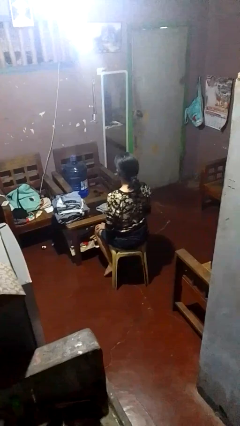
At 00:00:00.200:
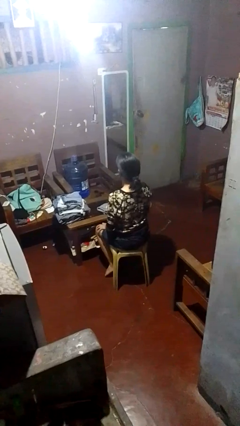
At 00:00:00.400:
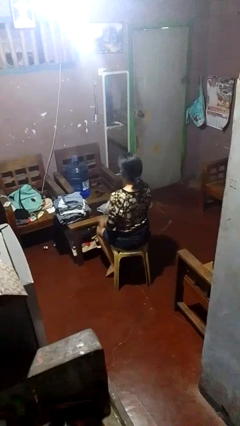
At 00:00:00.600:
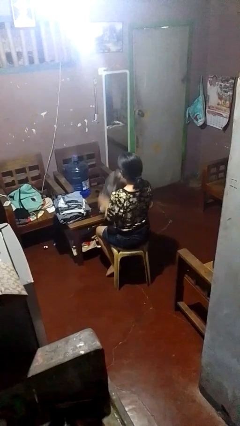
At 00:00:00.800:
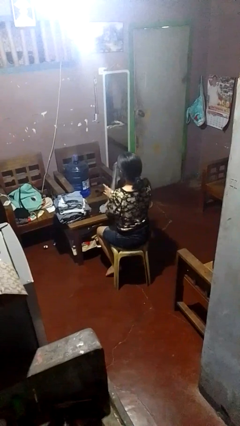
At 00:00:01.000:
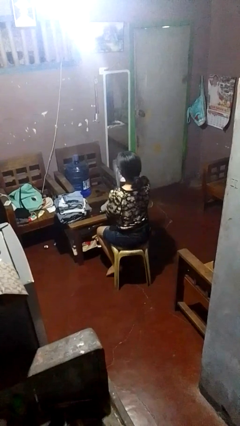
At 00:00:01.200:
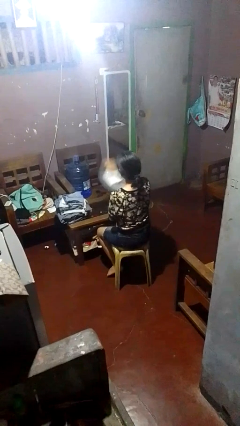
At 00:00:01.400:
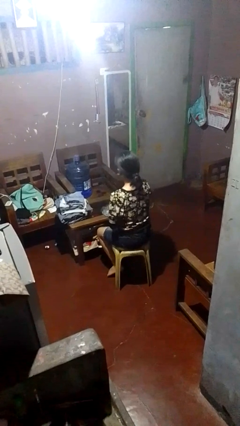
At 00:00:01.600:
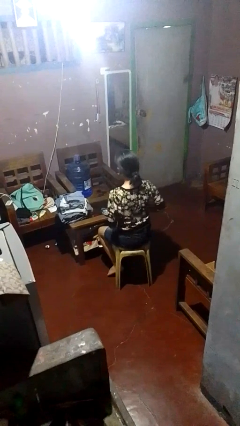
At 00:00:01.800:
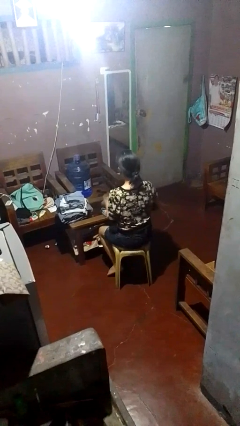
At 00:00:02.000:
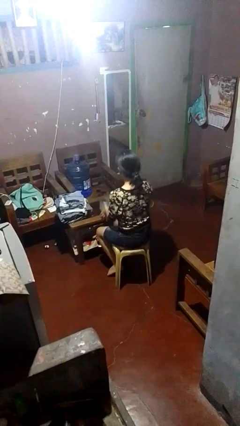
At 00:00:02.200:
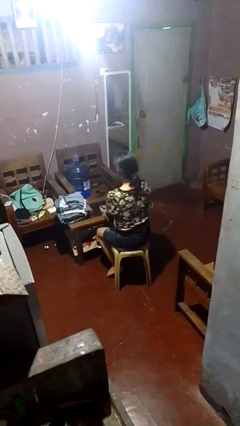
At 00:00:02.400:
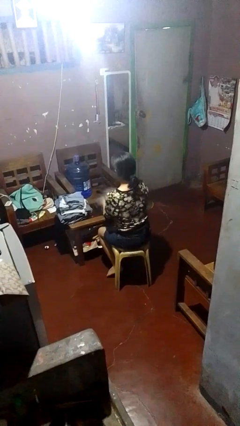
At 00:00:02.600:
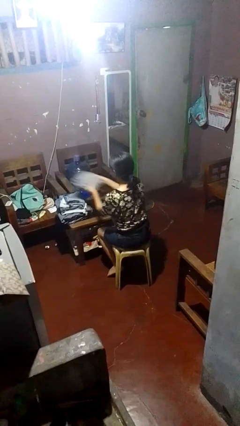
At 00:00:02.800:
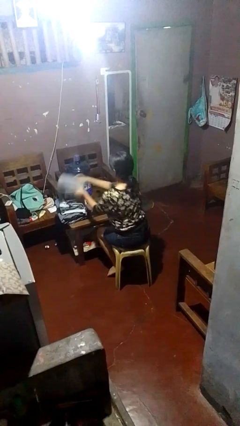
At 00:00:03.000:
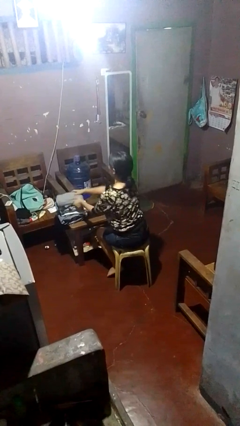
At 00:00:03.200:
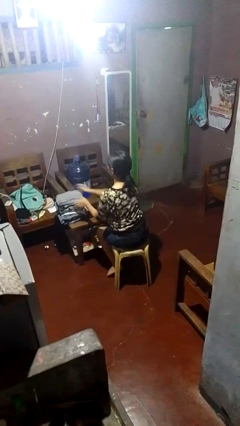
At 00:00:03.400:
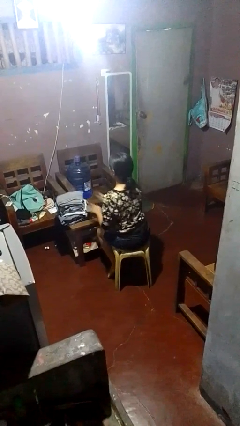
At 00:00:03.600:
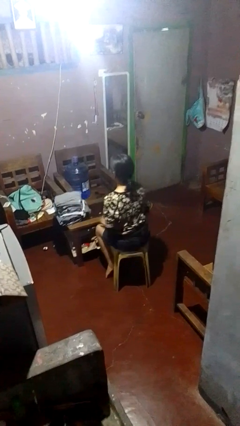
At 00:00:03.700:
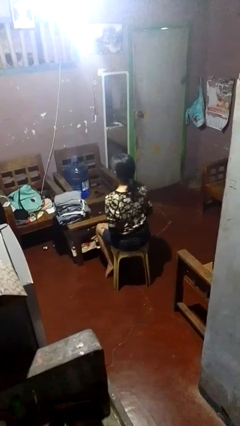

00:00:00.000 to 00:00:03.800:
person folds pants

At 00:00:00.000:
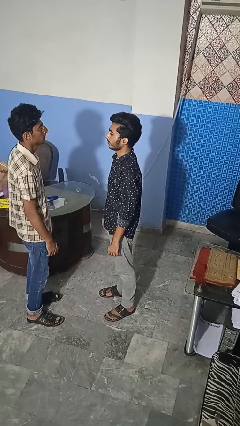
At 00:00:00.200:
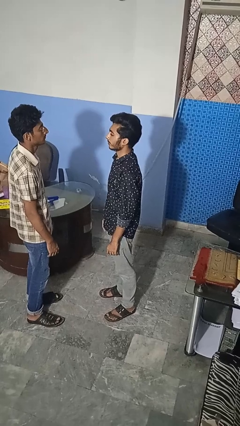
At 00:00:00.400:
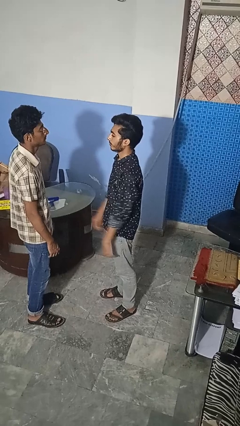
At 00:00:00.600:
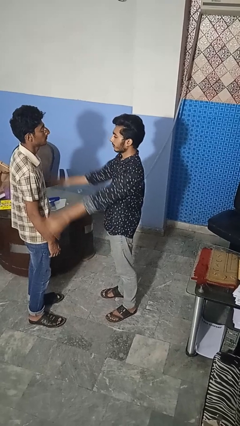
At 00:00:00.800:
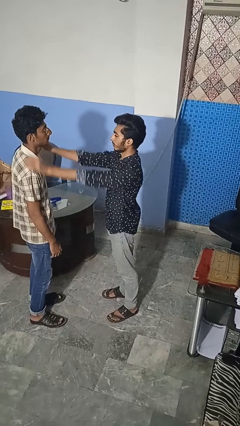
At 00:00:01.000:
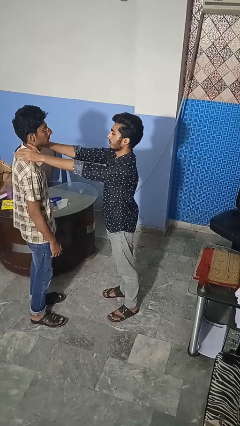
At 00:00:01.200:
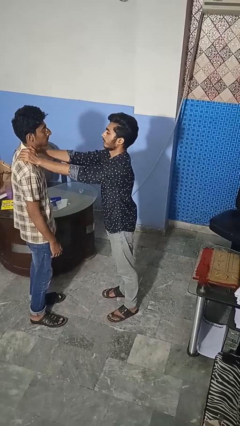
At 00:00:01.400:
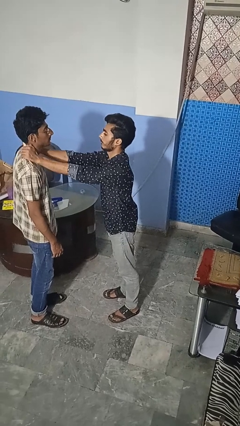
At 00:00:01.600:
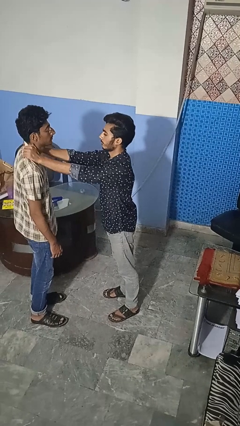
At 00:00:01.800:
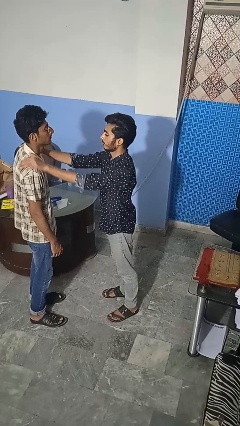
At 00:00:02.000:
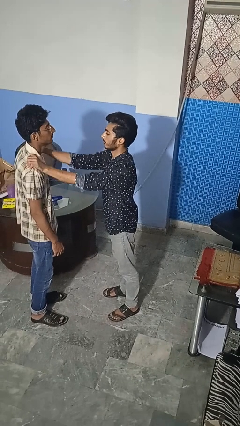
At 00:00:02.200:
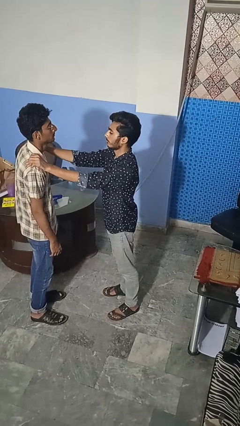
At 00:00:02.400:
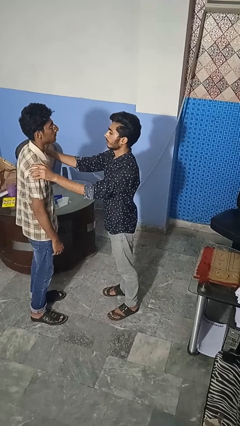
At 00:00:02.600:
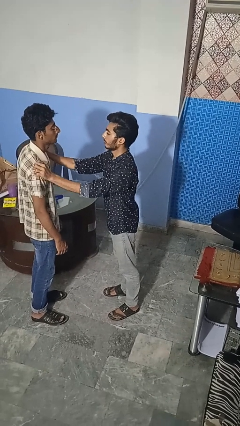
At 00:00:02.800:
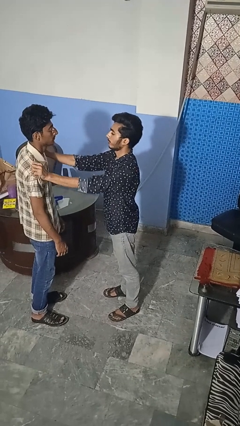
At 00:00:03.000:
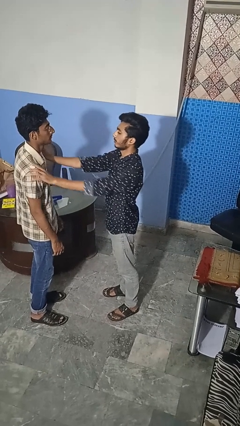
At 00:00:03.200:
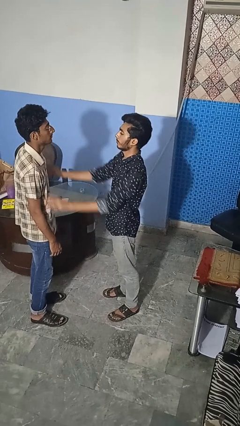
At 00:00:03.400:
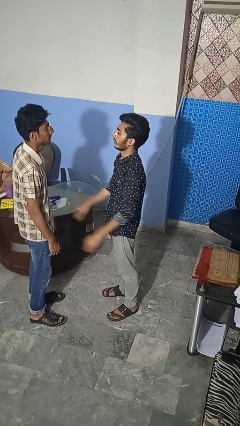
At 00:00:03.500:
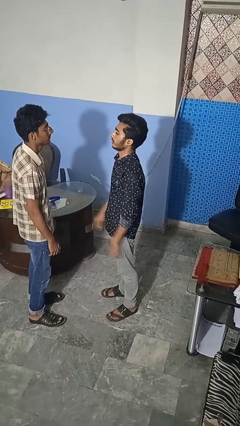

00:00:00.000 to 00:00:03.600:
person pounds shoulders of person

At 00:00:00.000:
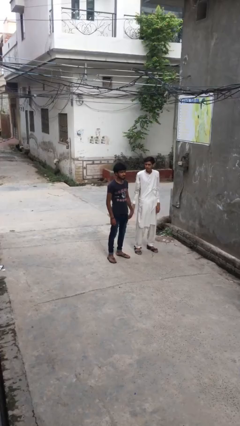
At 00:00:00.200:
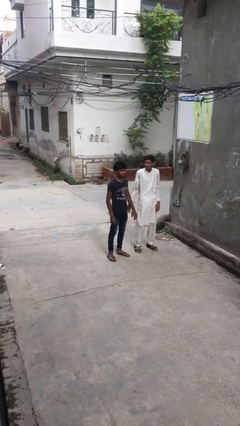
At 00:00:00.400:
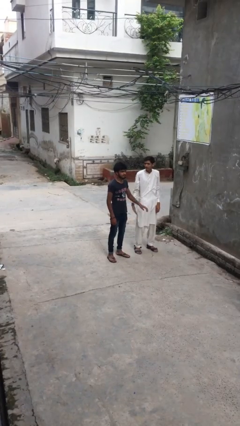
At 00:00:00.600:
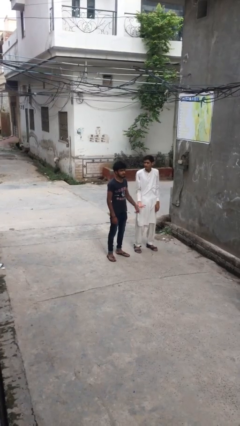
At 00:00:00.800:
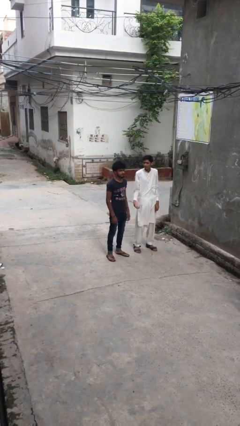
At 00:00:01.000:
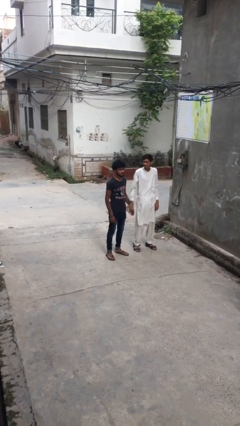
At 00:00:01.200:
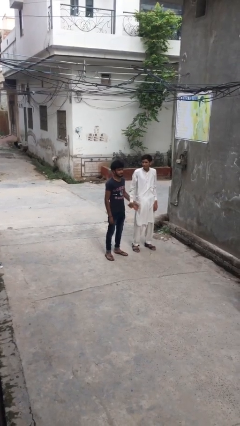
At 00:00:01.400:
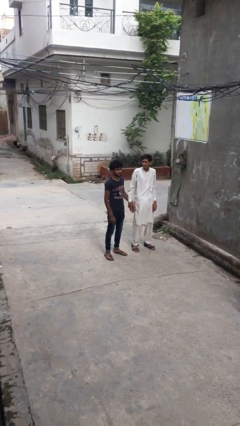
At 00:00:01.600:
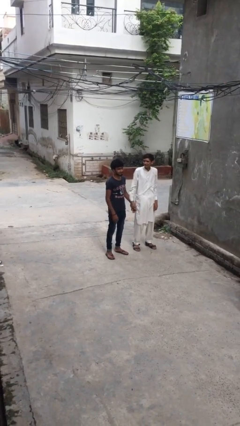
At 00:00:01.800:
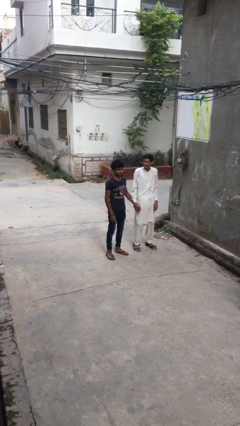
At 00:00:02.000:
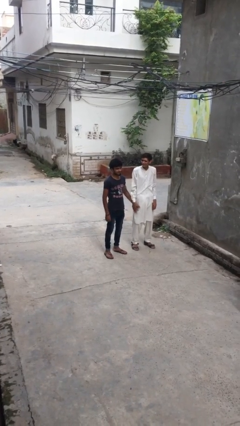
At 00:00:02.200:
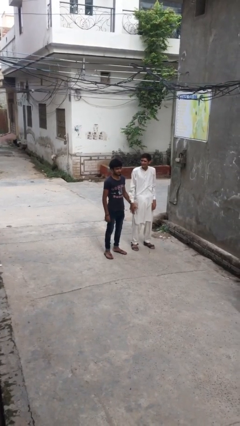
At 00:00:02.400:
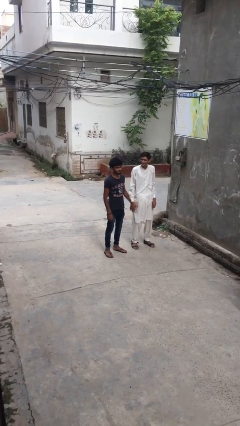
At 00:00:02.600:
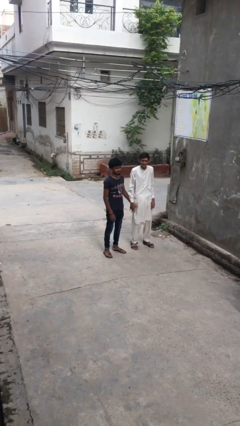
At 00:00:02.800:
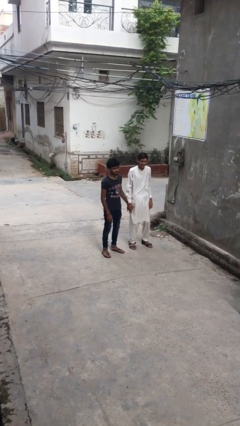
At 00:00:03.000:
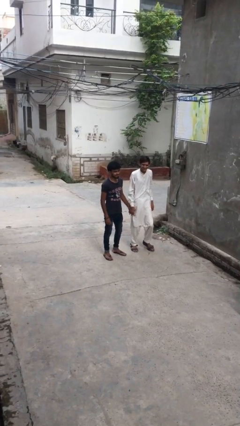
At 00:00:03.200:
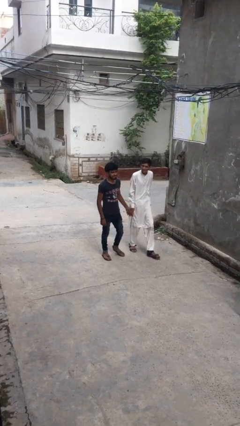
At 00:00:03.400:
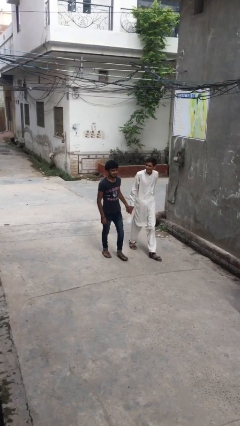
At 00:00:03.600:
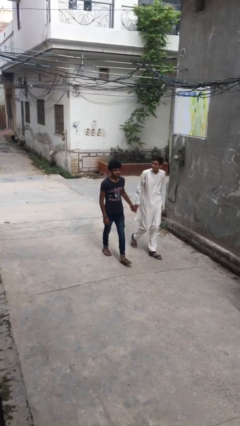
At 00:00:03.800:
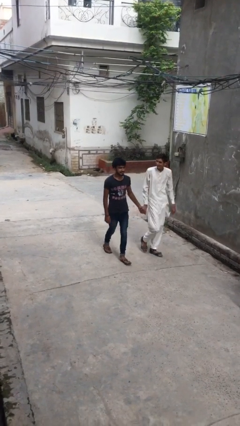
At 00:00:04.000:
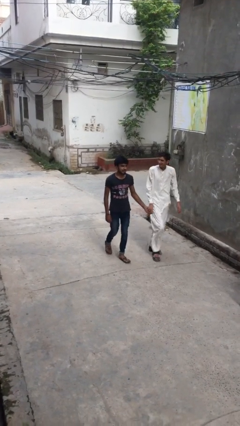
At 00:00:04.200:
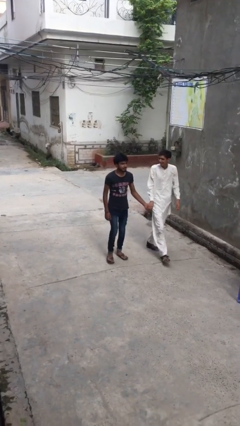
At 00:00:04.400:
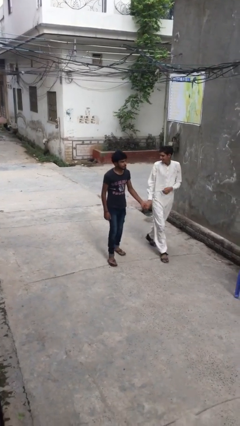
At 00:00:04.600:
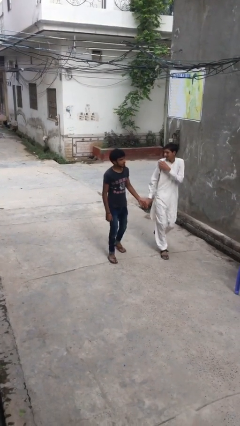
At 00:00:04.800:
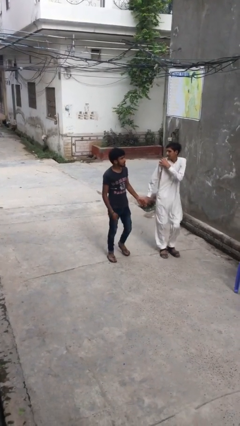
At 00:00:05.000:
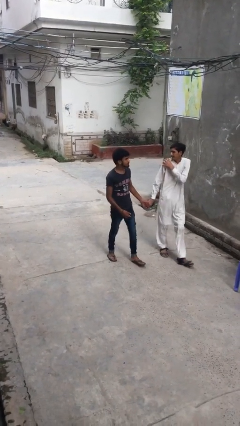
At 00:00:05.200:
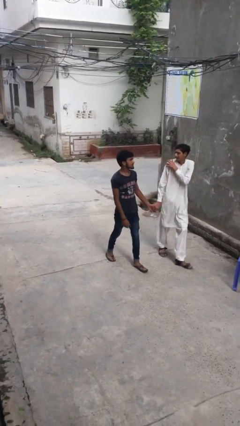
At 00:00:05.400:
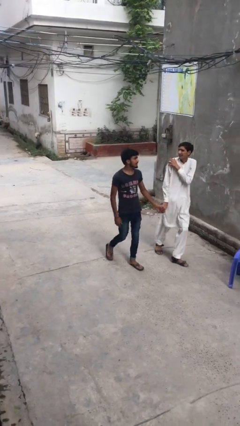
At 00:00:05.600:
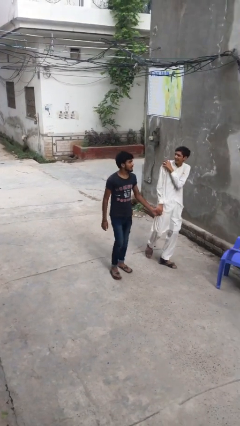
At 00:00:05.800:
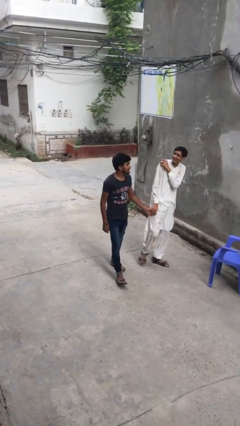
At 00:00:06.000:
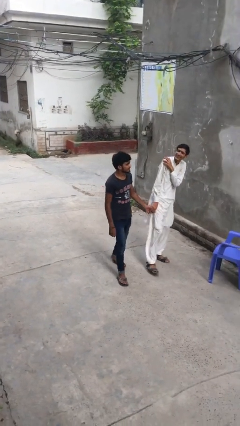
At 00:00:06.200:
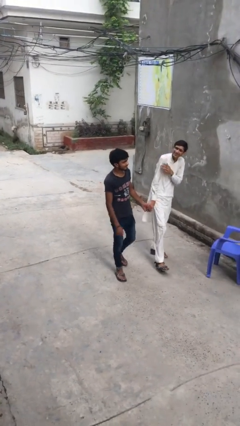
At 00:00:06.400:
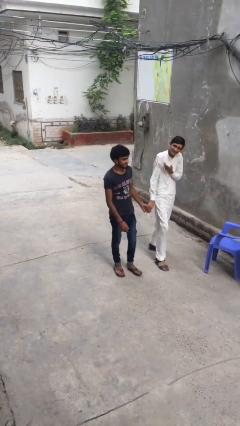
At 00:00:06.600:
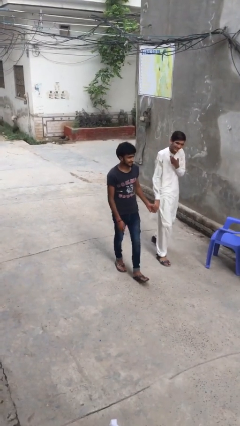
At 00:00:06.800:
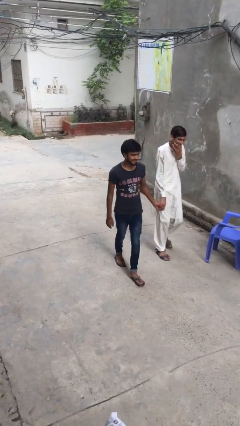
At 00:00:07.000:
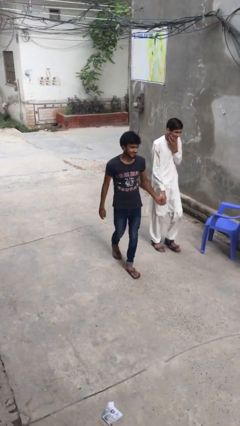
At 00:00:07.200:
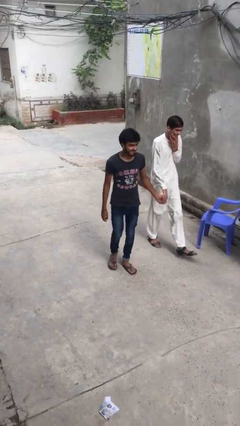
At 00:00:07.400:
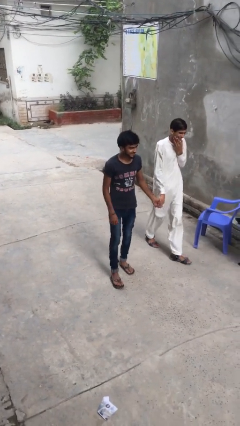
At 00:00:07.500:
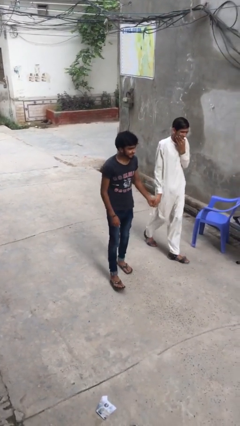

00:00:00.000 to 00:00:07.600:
person holds hand

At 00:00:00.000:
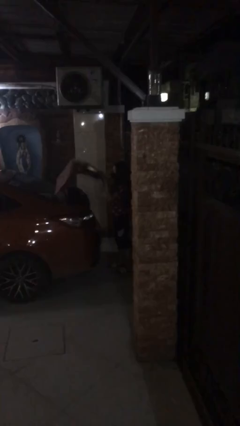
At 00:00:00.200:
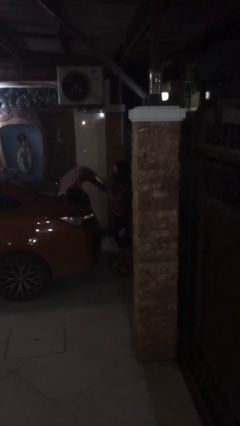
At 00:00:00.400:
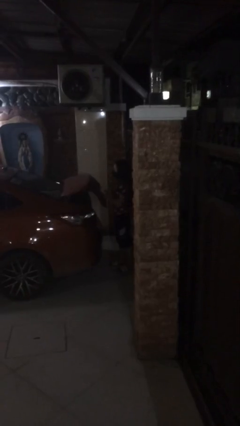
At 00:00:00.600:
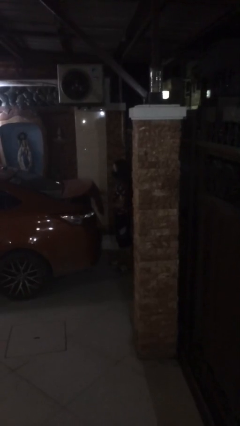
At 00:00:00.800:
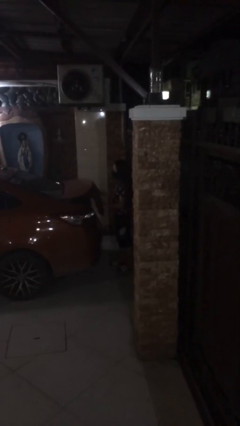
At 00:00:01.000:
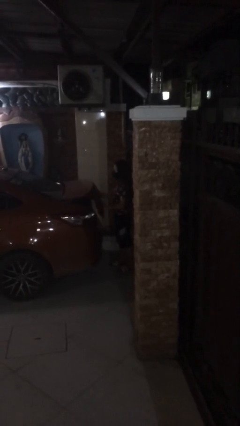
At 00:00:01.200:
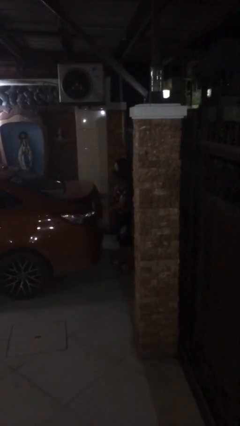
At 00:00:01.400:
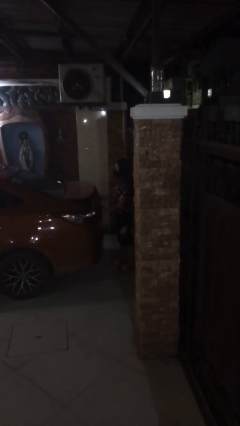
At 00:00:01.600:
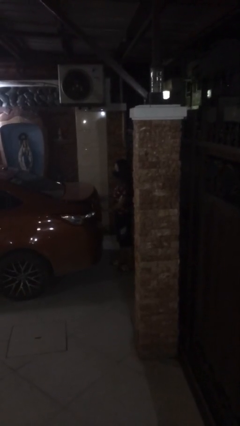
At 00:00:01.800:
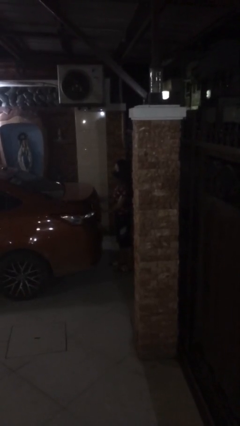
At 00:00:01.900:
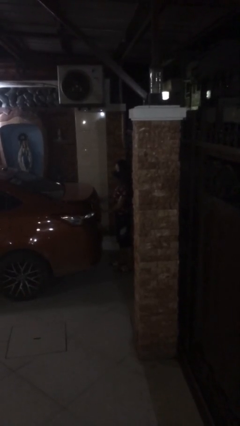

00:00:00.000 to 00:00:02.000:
person closes car trunk

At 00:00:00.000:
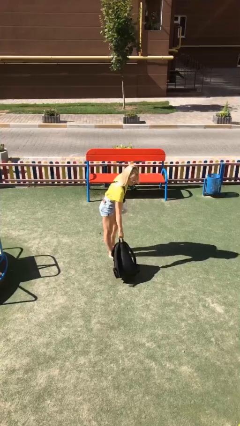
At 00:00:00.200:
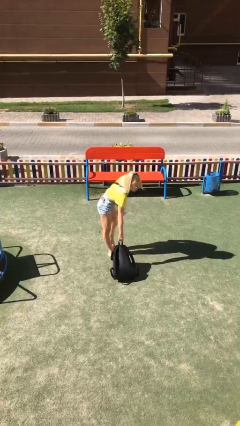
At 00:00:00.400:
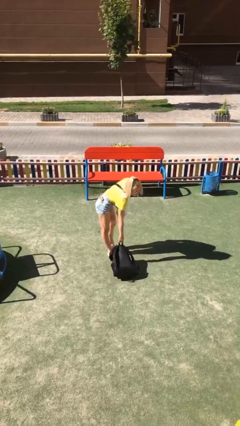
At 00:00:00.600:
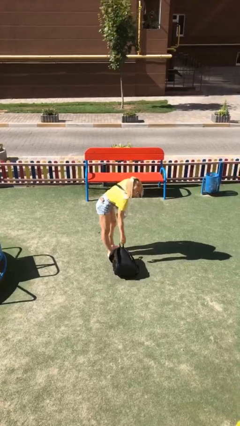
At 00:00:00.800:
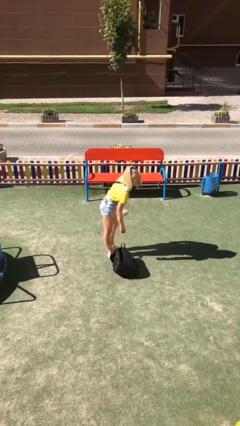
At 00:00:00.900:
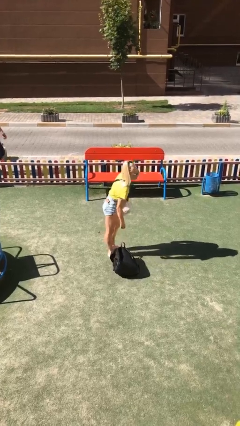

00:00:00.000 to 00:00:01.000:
person puts down object on floor
